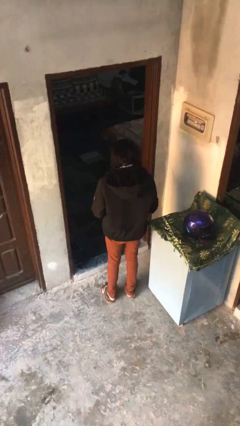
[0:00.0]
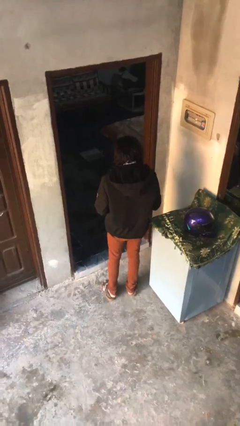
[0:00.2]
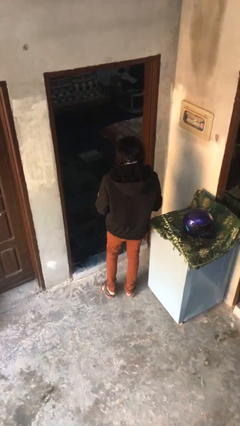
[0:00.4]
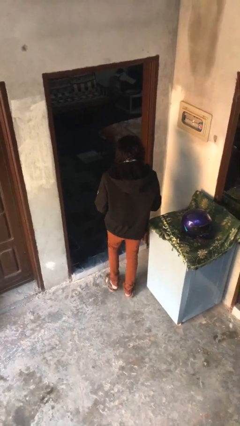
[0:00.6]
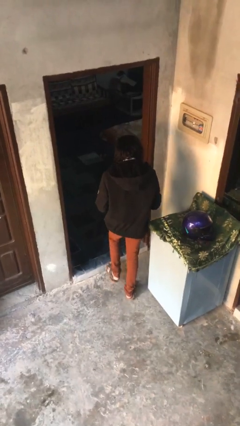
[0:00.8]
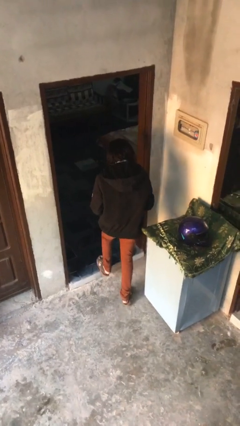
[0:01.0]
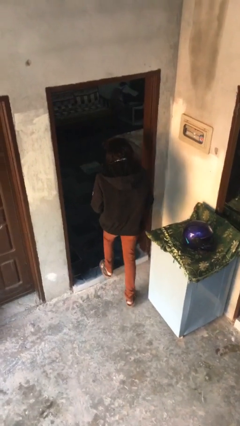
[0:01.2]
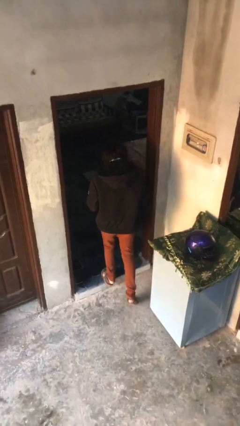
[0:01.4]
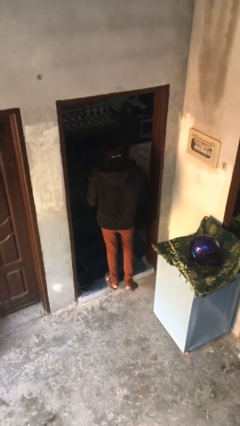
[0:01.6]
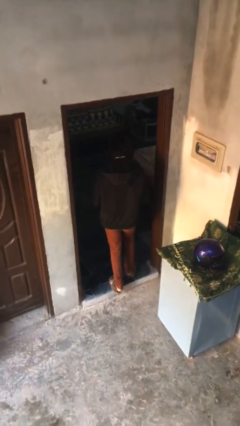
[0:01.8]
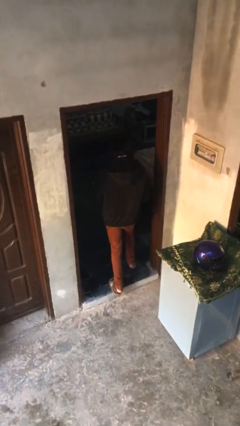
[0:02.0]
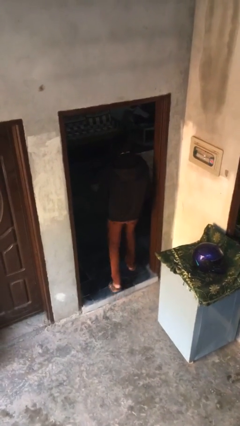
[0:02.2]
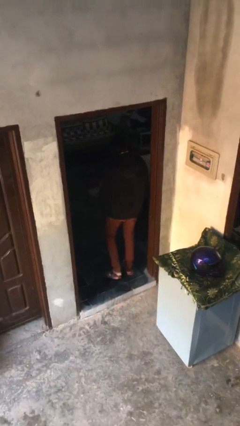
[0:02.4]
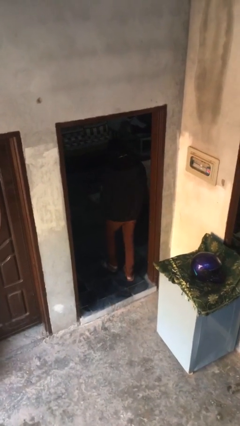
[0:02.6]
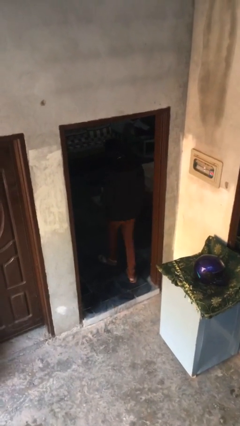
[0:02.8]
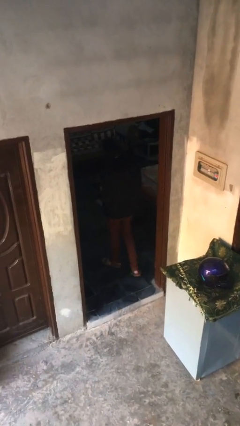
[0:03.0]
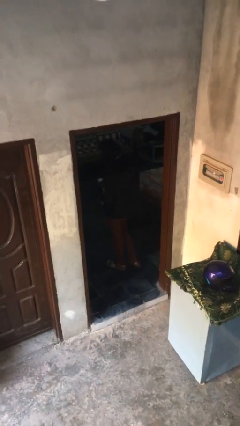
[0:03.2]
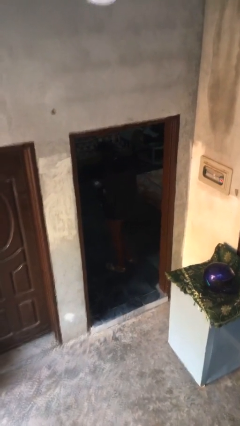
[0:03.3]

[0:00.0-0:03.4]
person enters scene through structure

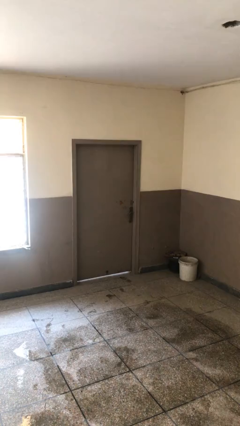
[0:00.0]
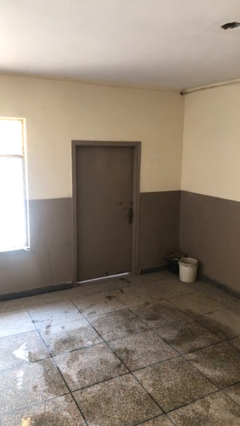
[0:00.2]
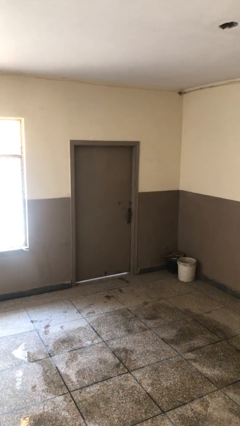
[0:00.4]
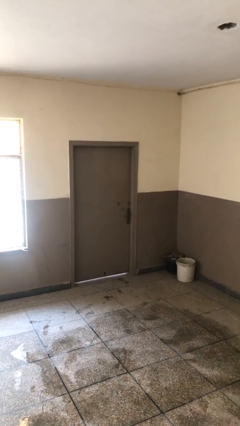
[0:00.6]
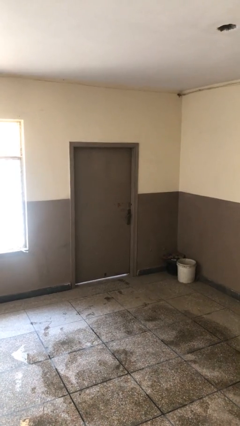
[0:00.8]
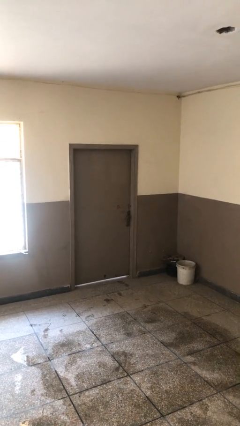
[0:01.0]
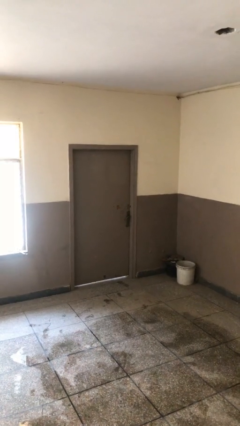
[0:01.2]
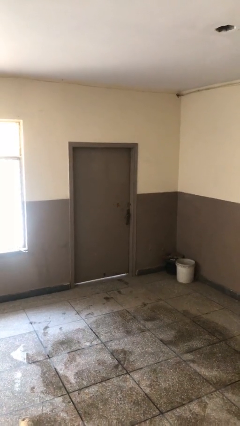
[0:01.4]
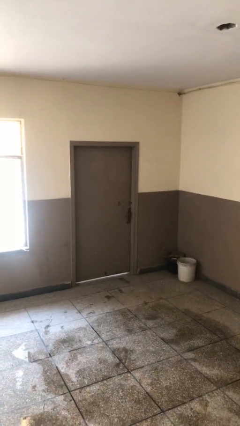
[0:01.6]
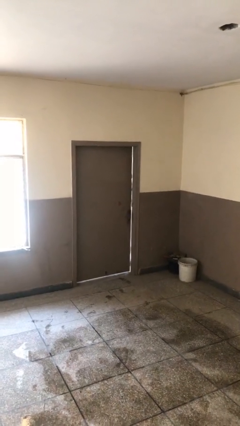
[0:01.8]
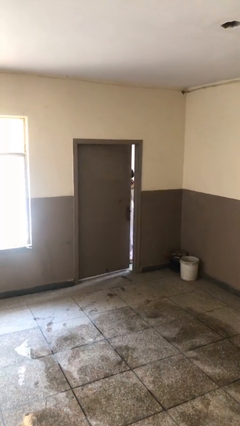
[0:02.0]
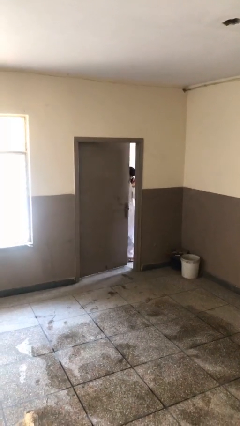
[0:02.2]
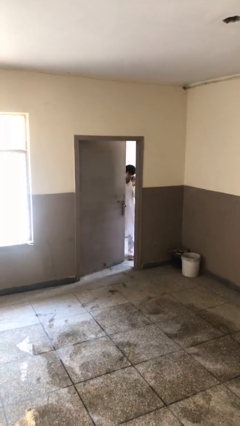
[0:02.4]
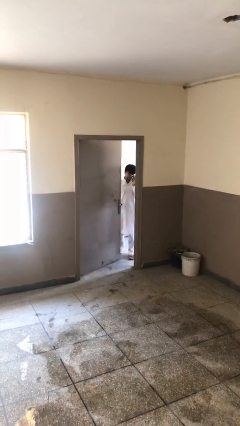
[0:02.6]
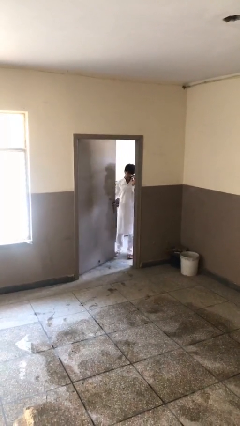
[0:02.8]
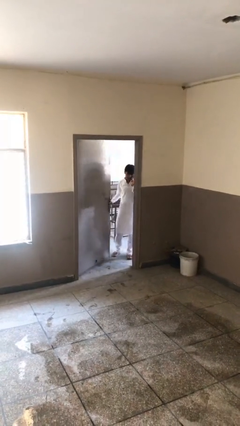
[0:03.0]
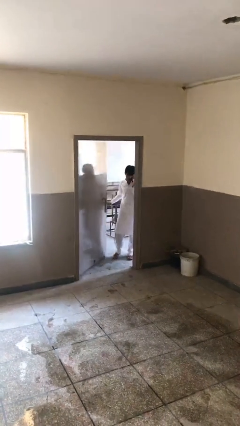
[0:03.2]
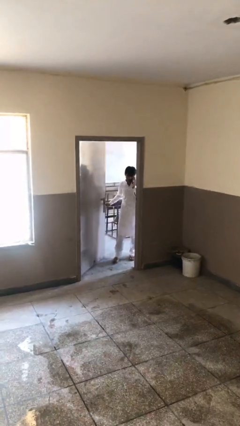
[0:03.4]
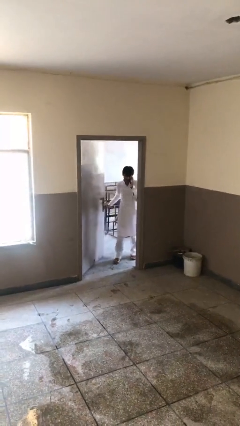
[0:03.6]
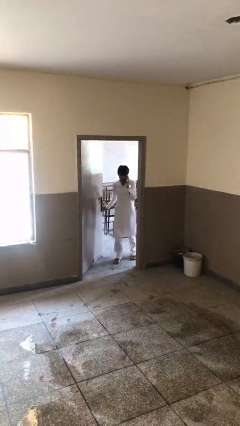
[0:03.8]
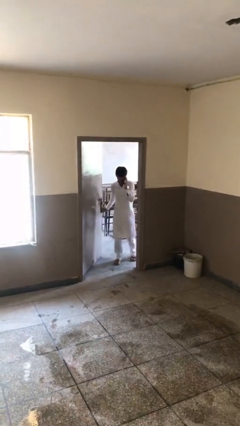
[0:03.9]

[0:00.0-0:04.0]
person opens facility door

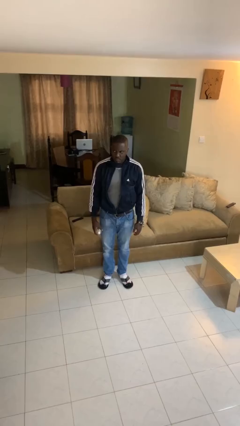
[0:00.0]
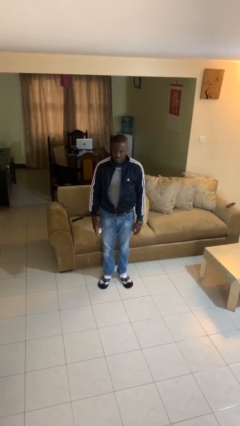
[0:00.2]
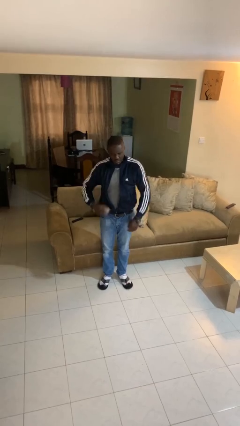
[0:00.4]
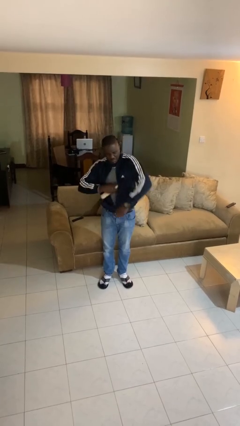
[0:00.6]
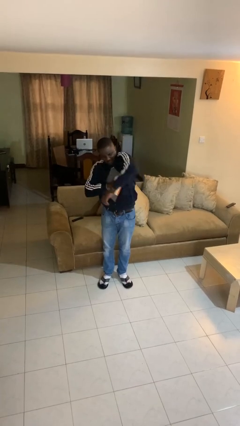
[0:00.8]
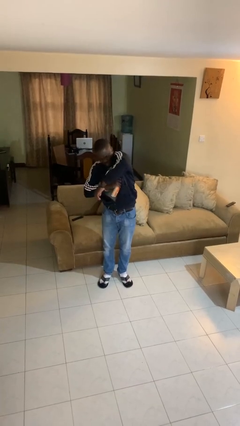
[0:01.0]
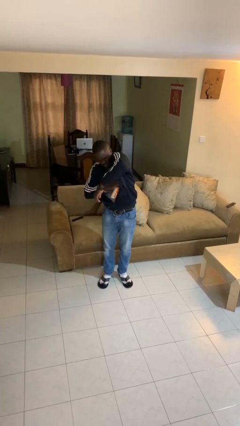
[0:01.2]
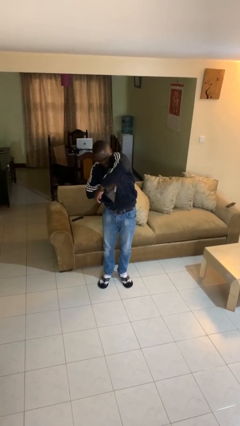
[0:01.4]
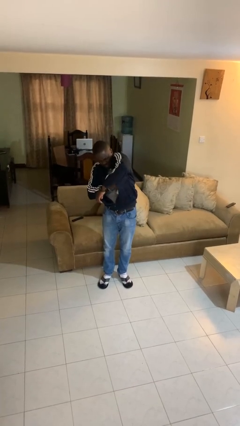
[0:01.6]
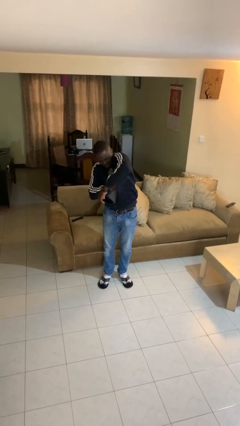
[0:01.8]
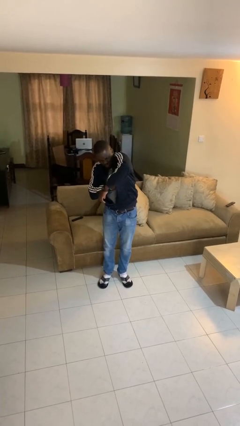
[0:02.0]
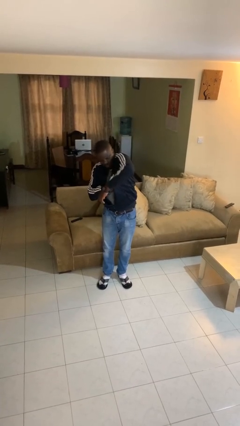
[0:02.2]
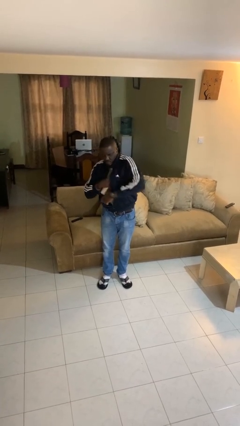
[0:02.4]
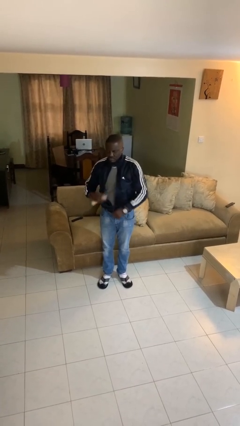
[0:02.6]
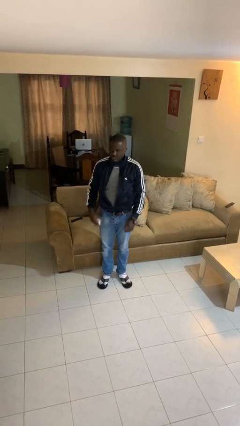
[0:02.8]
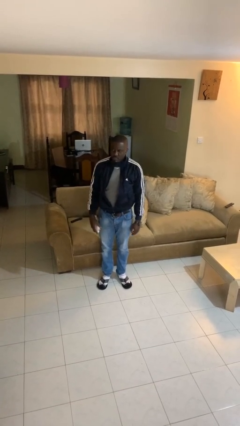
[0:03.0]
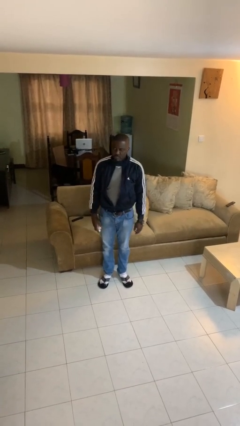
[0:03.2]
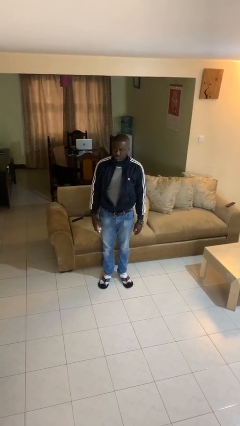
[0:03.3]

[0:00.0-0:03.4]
person applies deodorant

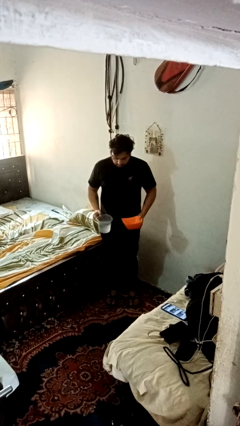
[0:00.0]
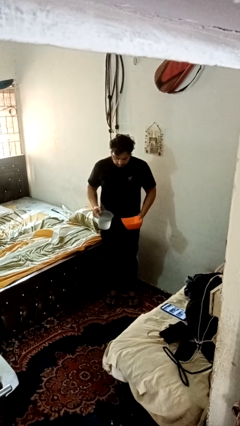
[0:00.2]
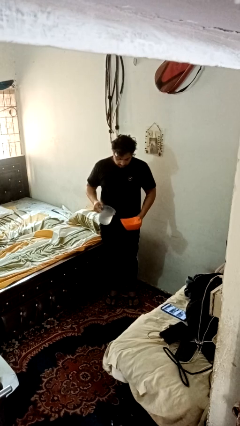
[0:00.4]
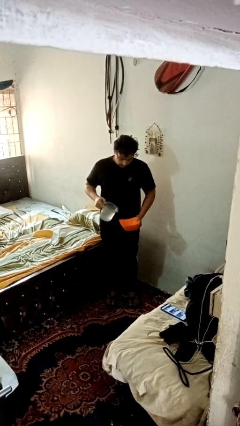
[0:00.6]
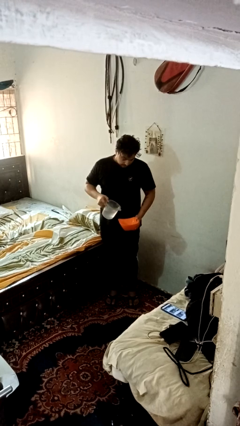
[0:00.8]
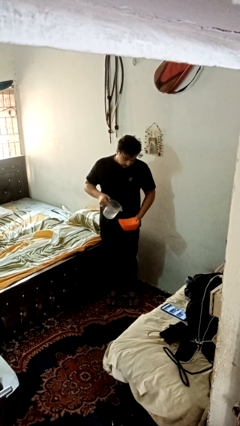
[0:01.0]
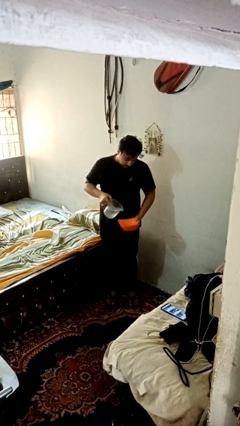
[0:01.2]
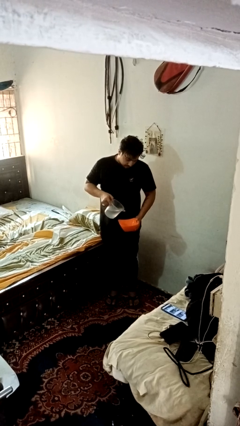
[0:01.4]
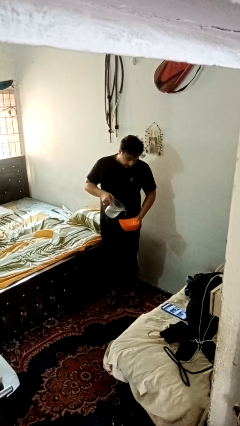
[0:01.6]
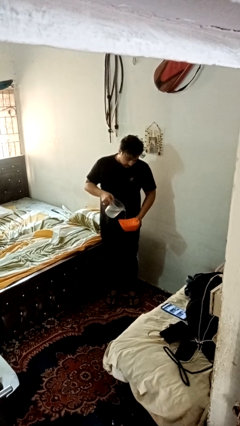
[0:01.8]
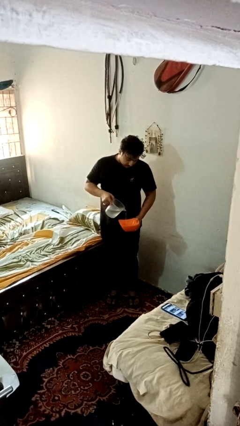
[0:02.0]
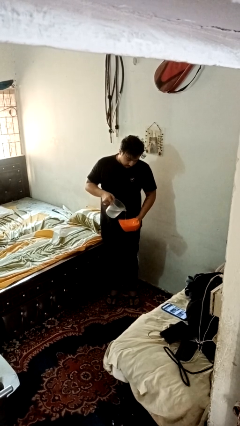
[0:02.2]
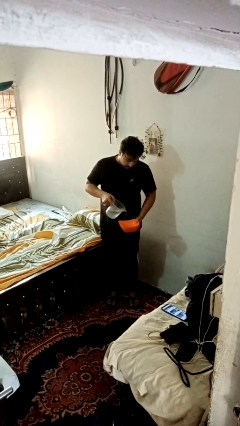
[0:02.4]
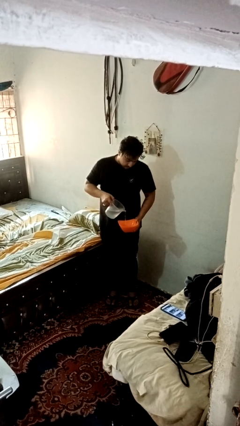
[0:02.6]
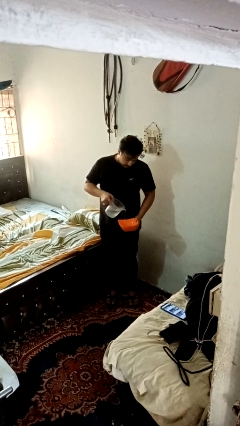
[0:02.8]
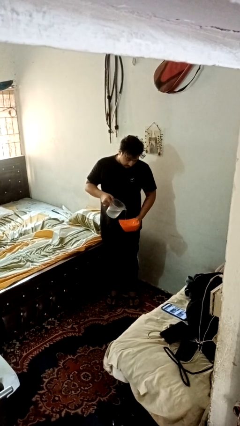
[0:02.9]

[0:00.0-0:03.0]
person pours into bowl

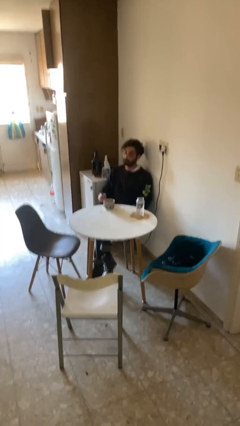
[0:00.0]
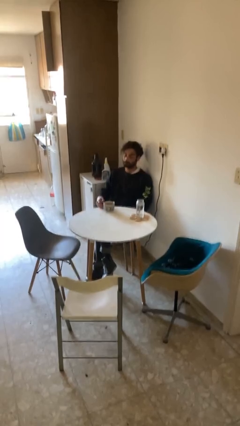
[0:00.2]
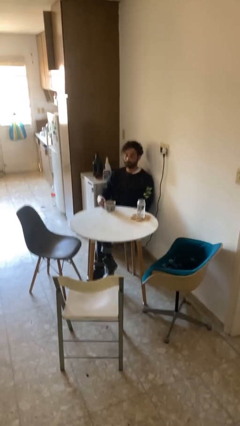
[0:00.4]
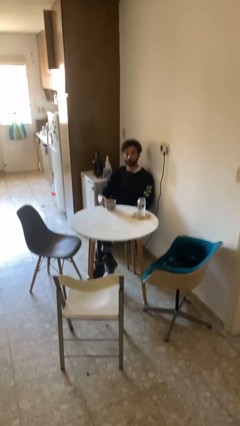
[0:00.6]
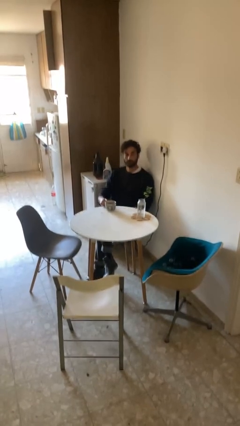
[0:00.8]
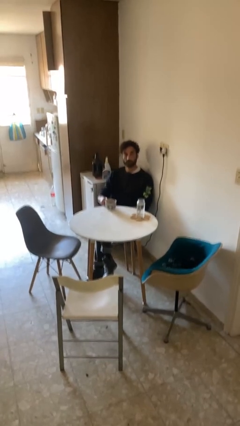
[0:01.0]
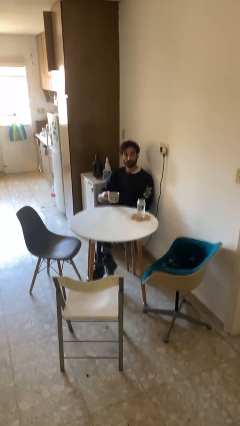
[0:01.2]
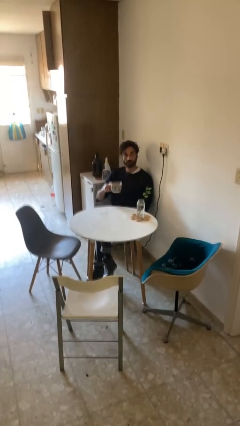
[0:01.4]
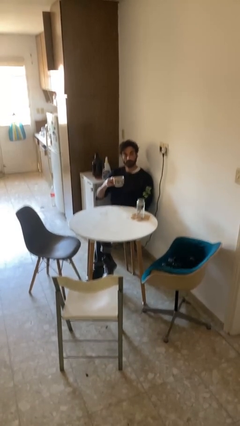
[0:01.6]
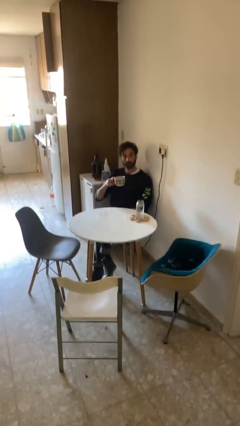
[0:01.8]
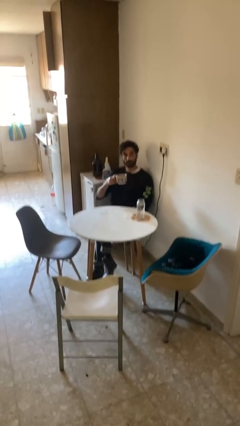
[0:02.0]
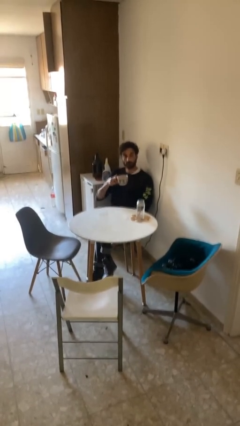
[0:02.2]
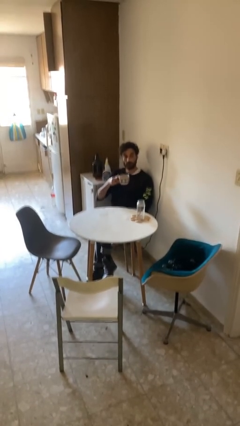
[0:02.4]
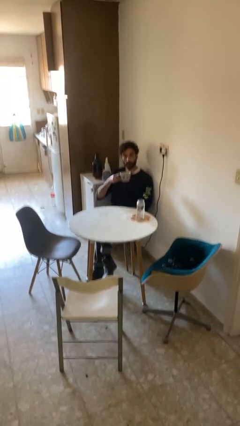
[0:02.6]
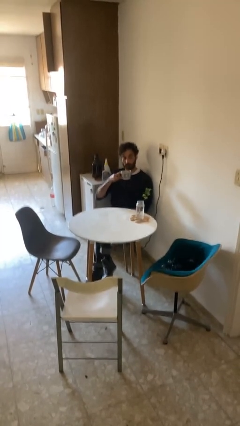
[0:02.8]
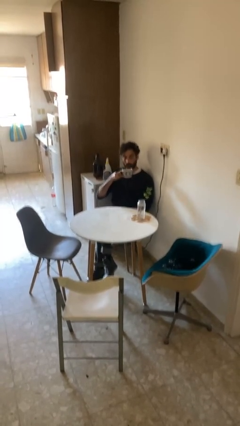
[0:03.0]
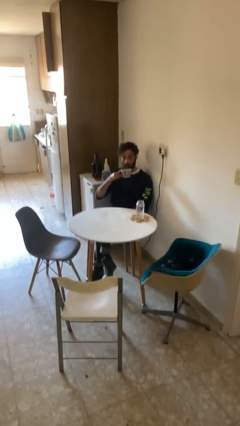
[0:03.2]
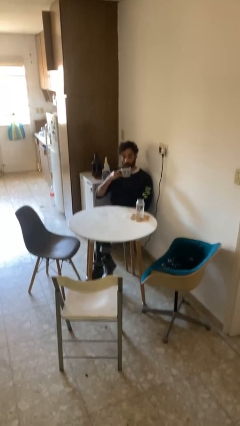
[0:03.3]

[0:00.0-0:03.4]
person picks up object from table

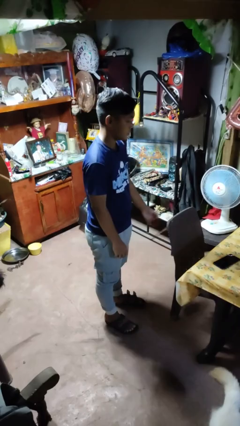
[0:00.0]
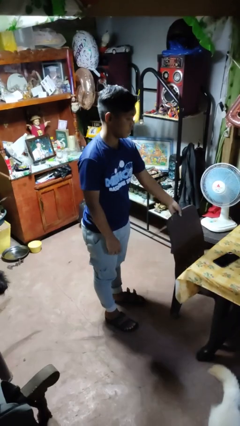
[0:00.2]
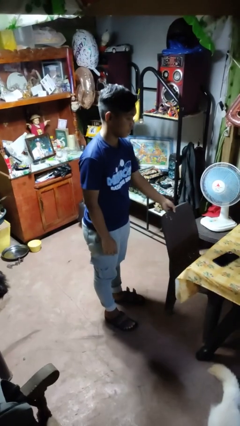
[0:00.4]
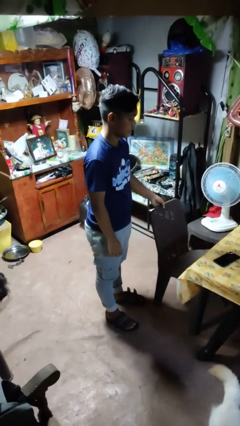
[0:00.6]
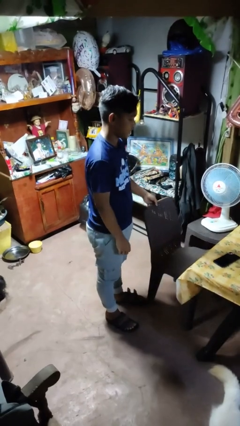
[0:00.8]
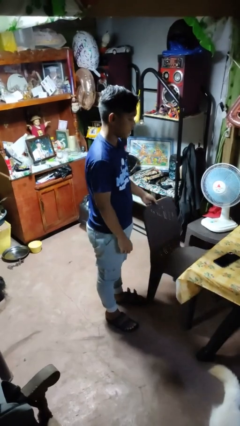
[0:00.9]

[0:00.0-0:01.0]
person pulls out chair
